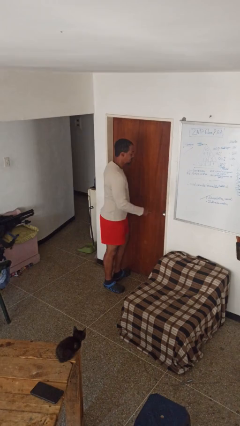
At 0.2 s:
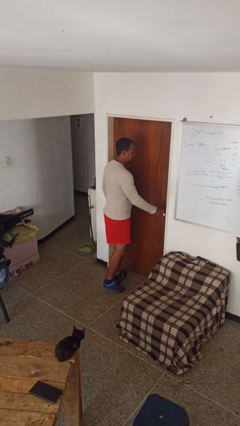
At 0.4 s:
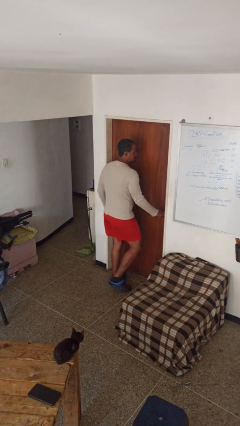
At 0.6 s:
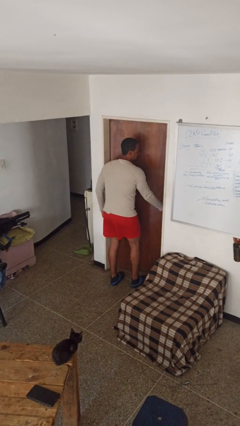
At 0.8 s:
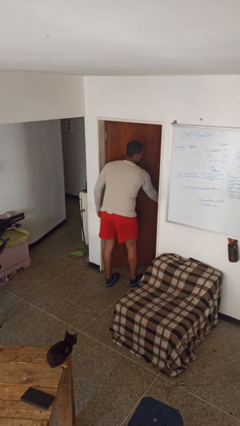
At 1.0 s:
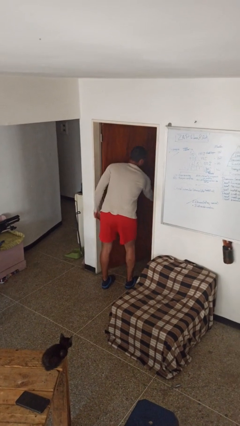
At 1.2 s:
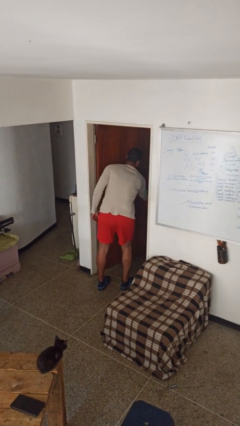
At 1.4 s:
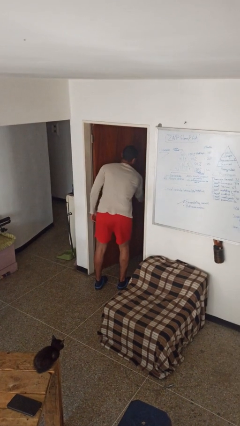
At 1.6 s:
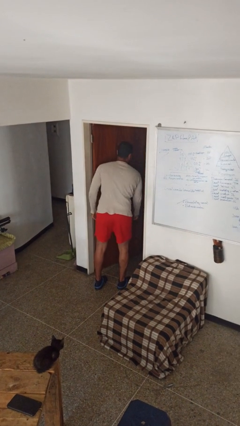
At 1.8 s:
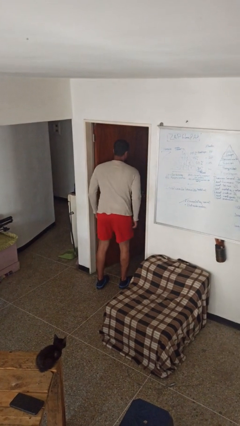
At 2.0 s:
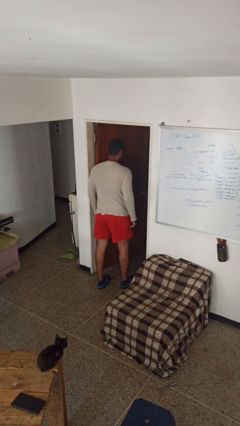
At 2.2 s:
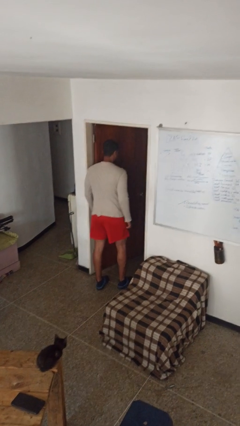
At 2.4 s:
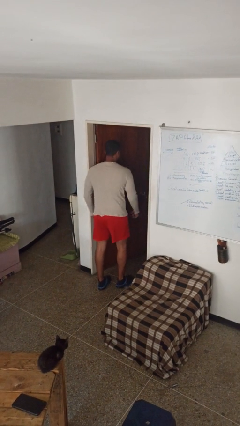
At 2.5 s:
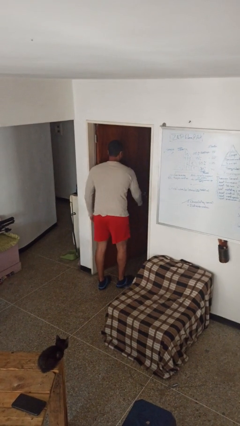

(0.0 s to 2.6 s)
person opens facility door

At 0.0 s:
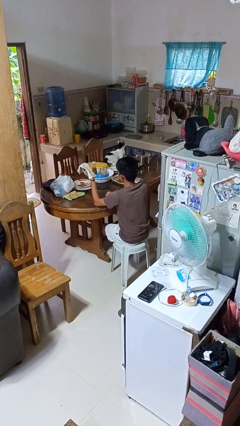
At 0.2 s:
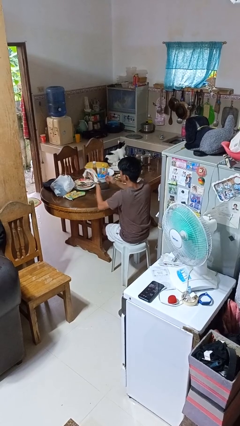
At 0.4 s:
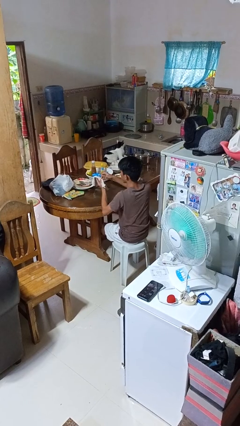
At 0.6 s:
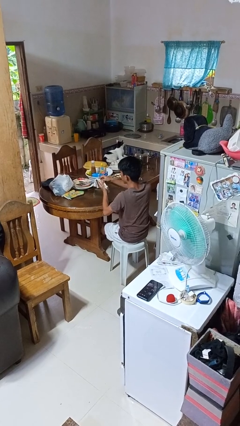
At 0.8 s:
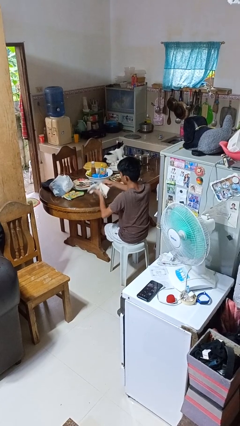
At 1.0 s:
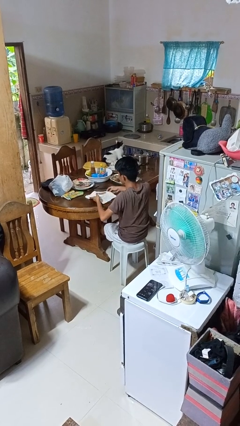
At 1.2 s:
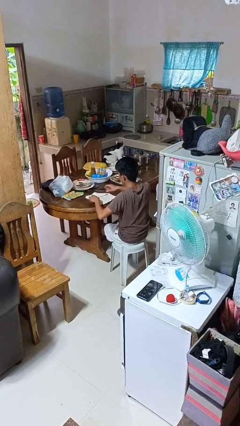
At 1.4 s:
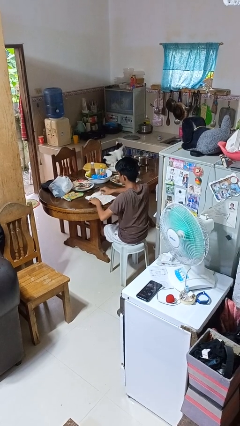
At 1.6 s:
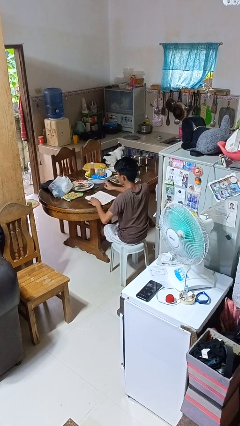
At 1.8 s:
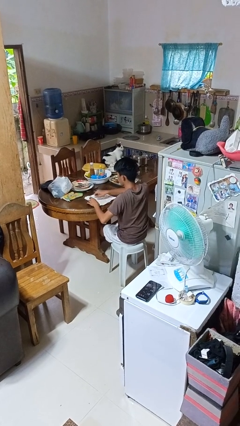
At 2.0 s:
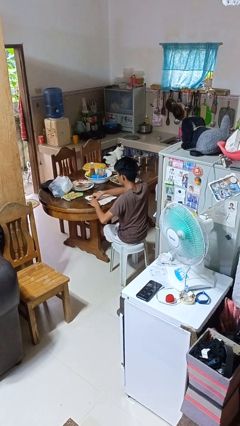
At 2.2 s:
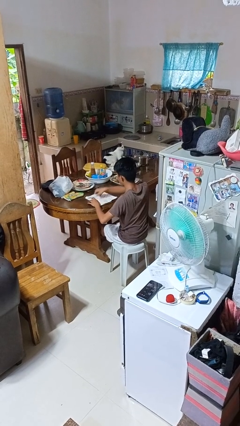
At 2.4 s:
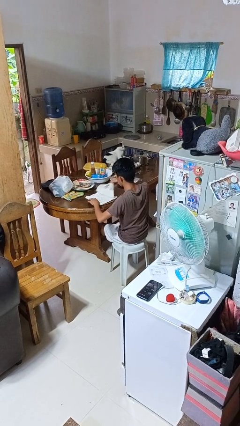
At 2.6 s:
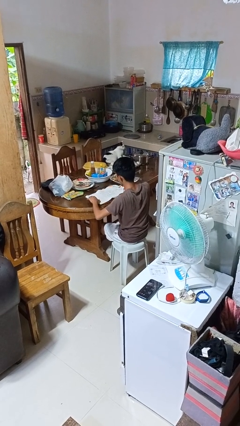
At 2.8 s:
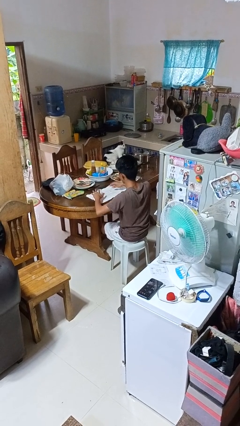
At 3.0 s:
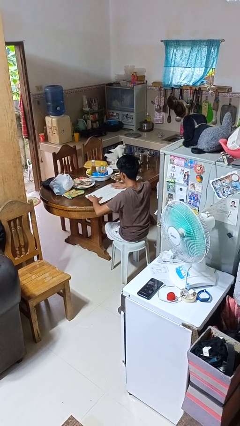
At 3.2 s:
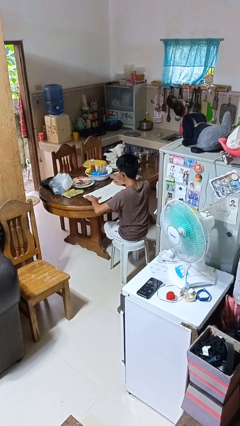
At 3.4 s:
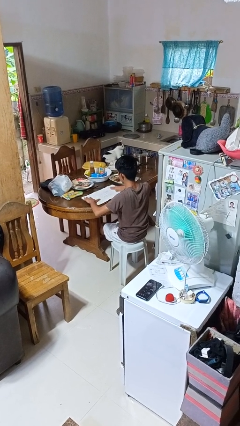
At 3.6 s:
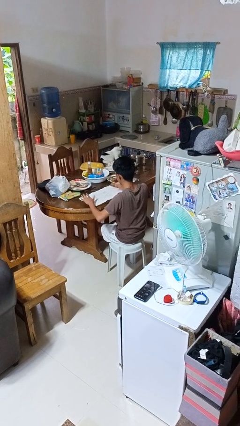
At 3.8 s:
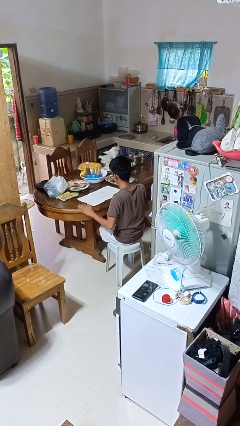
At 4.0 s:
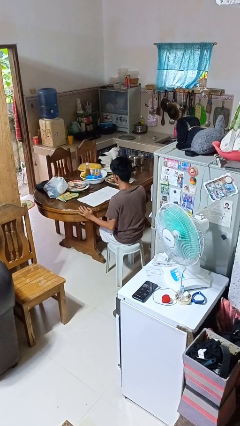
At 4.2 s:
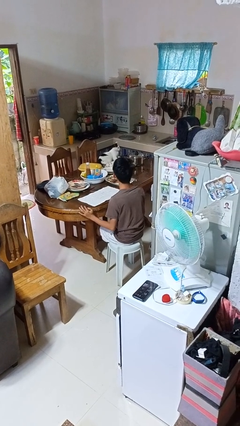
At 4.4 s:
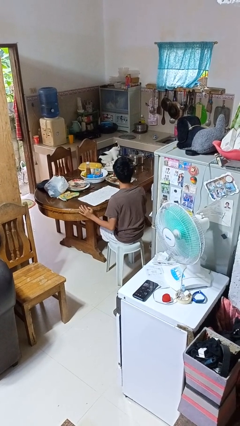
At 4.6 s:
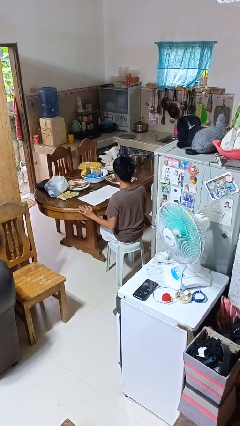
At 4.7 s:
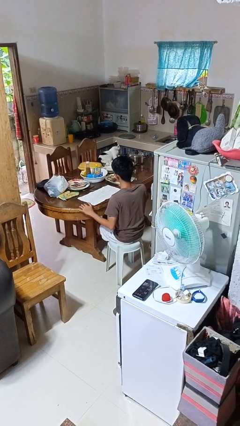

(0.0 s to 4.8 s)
person spreads tablecloth

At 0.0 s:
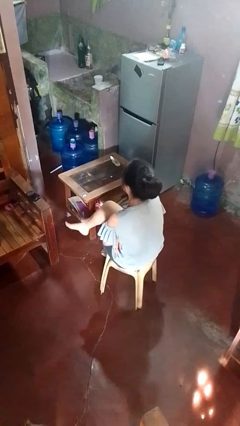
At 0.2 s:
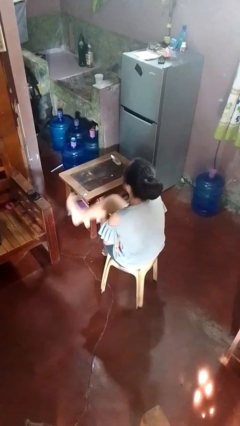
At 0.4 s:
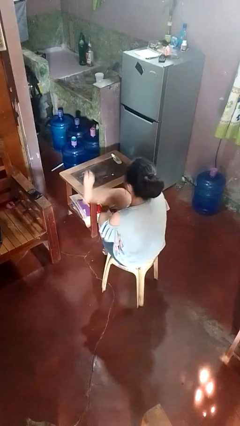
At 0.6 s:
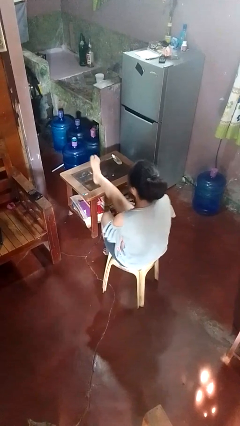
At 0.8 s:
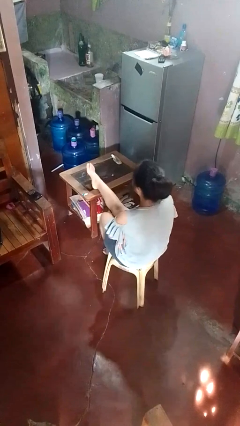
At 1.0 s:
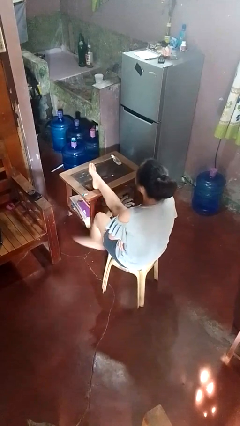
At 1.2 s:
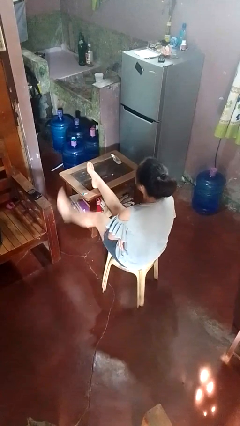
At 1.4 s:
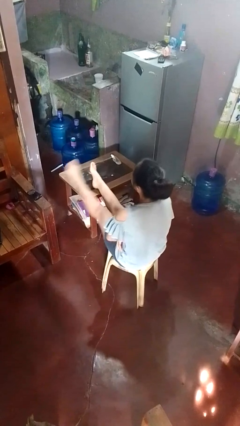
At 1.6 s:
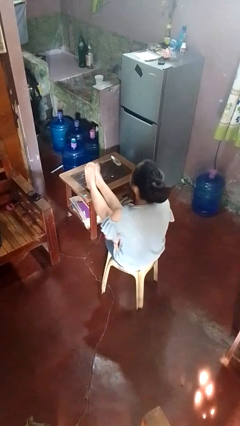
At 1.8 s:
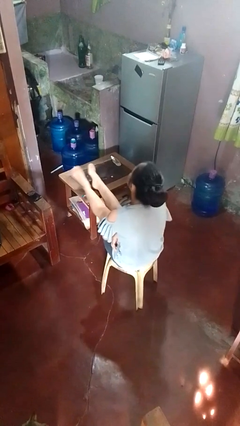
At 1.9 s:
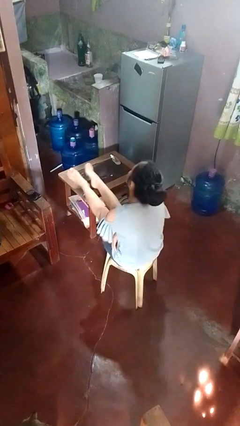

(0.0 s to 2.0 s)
person puts feet up

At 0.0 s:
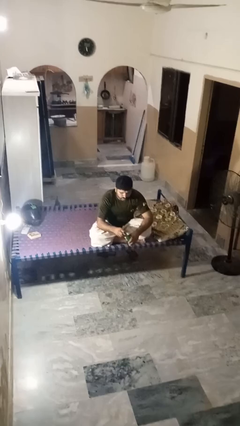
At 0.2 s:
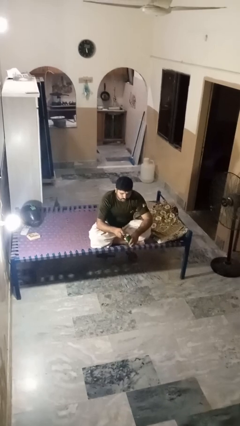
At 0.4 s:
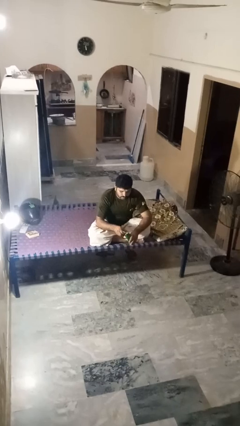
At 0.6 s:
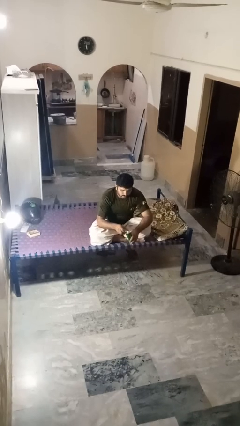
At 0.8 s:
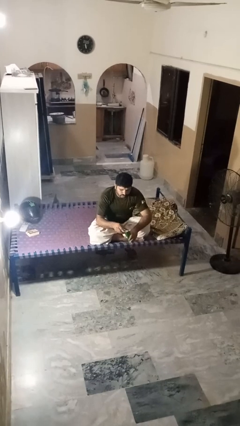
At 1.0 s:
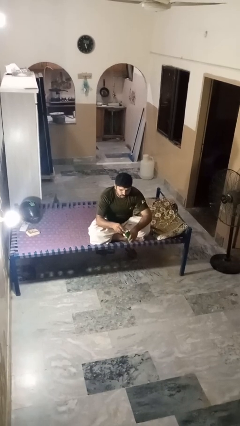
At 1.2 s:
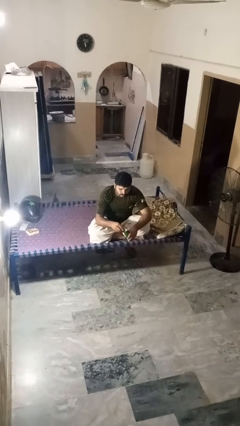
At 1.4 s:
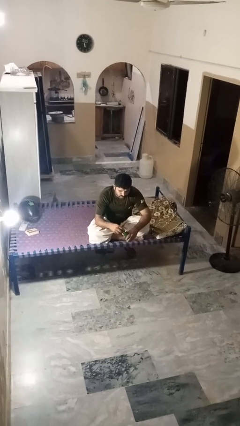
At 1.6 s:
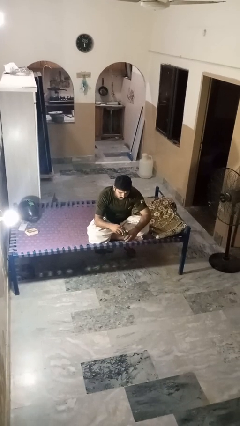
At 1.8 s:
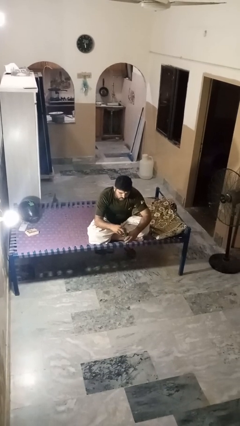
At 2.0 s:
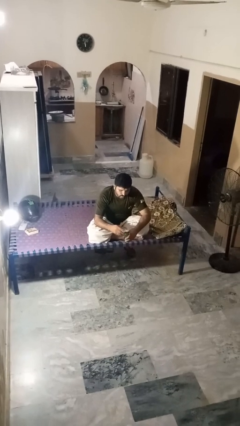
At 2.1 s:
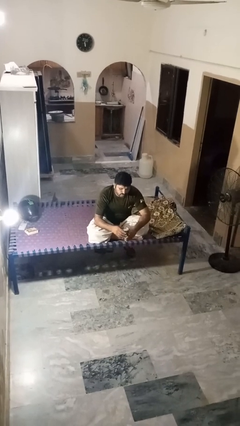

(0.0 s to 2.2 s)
person opens beverage can

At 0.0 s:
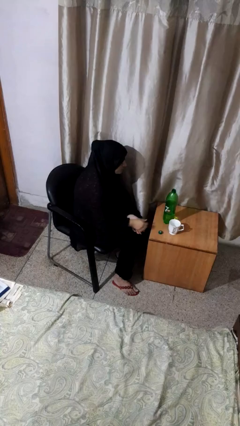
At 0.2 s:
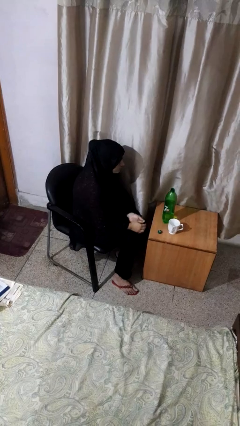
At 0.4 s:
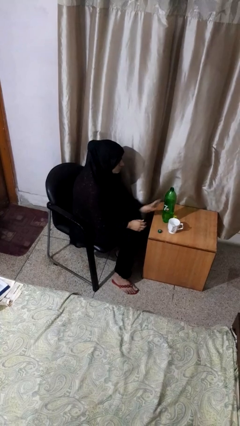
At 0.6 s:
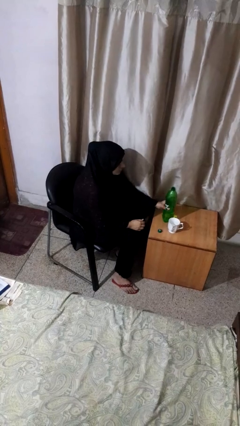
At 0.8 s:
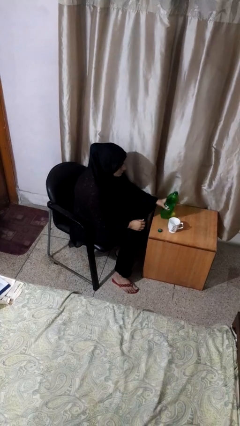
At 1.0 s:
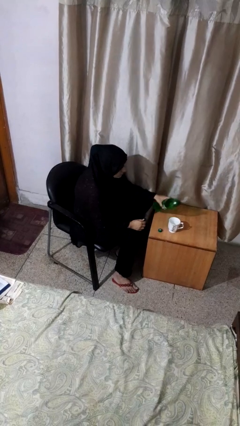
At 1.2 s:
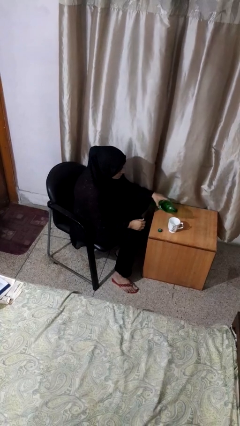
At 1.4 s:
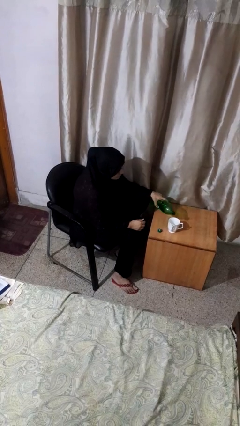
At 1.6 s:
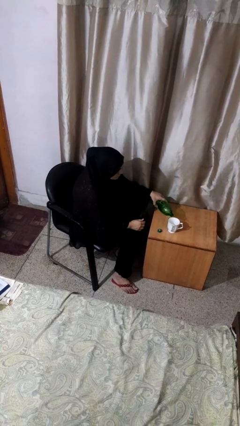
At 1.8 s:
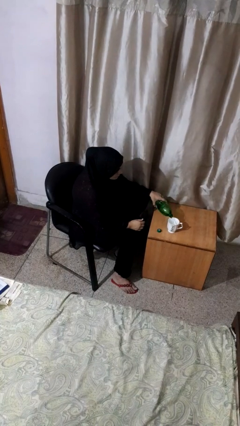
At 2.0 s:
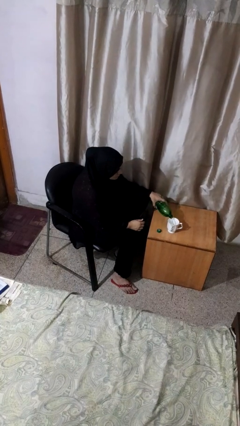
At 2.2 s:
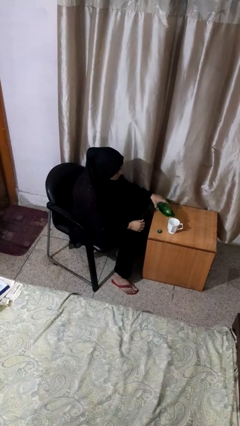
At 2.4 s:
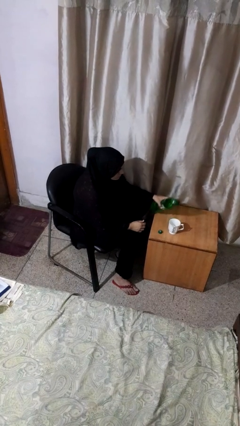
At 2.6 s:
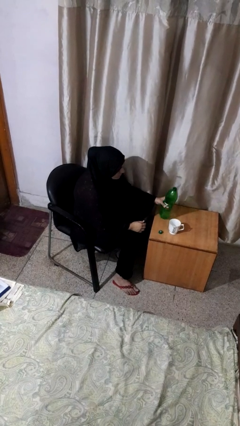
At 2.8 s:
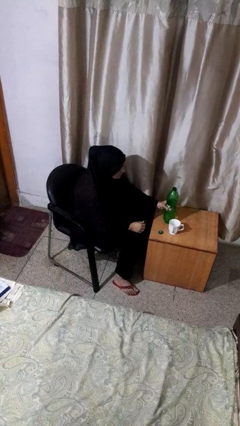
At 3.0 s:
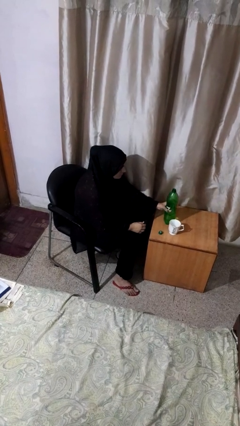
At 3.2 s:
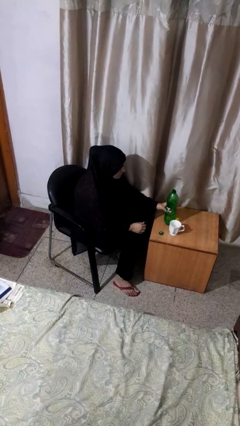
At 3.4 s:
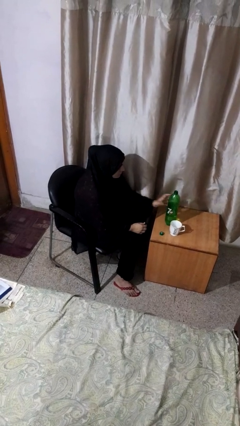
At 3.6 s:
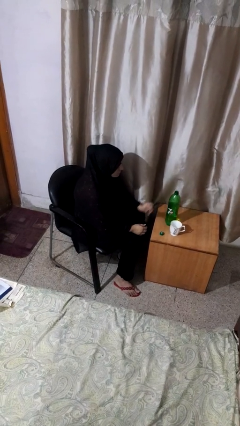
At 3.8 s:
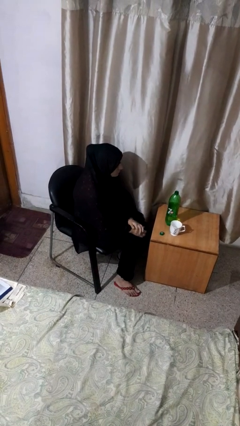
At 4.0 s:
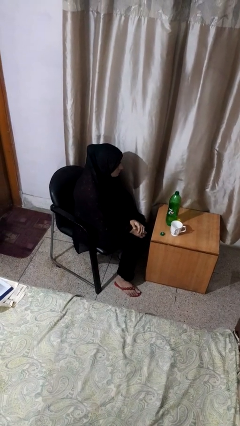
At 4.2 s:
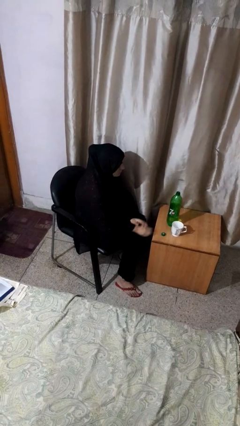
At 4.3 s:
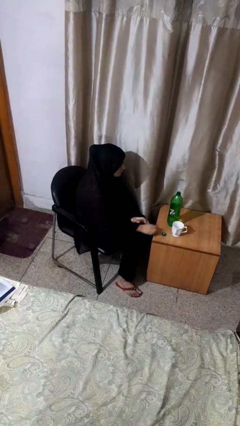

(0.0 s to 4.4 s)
person pours liquid into cup

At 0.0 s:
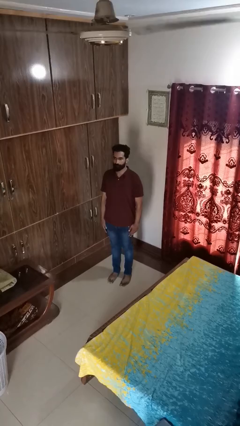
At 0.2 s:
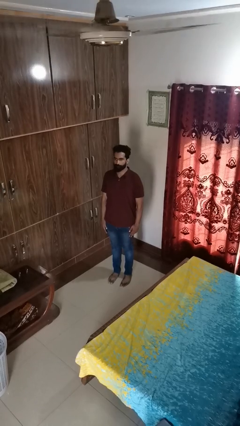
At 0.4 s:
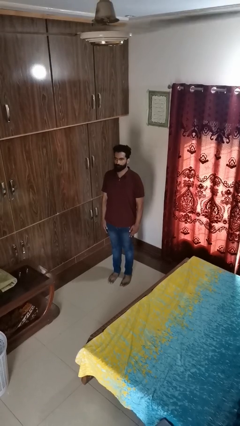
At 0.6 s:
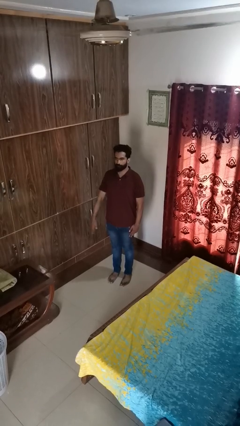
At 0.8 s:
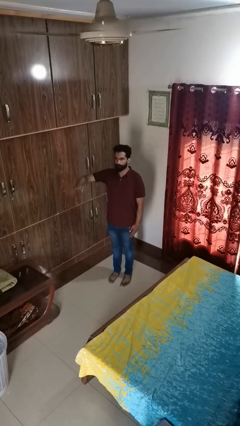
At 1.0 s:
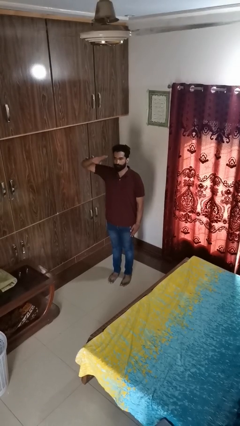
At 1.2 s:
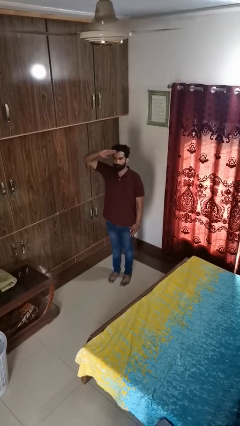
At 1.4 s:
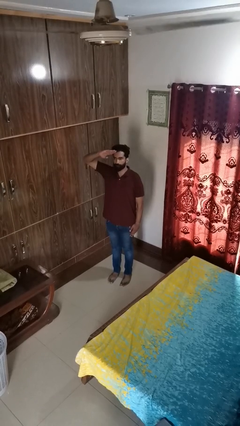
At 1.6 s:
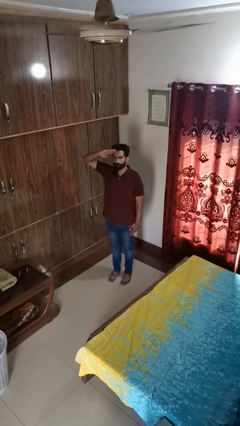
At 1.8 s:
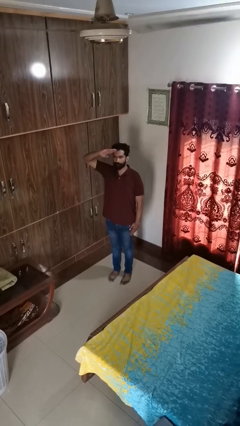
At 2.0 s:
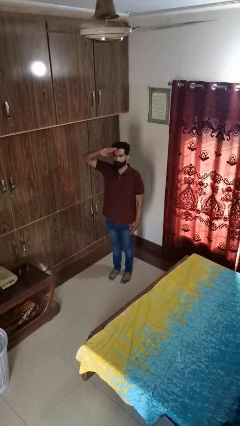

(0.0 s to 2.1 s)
person salutes
